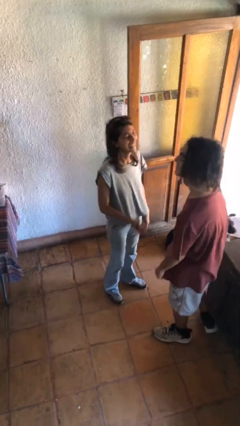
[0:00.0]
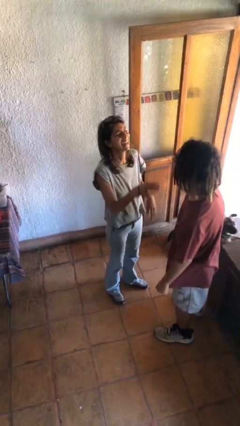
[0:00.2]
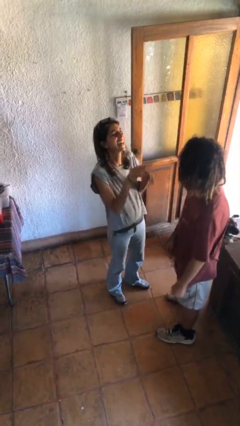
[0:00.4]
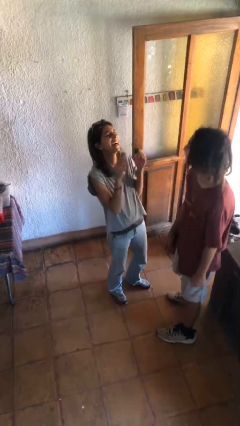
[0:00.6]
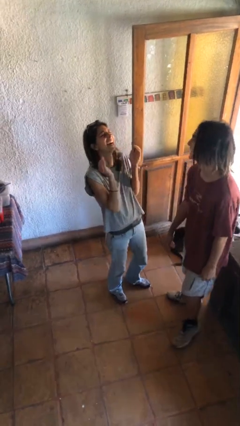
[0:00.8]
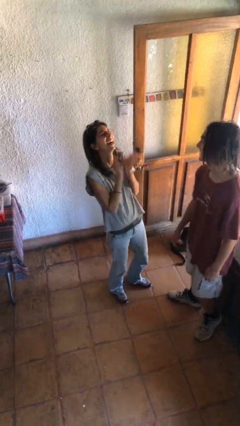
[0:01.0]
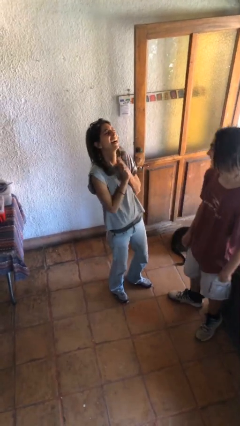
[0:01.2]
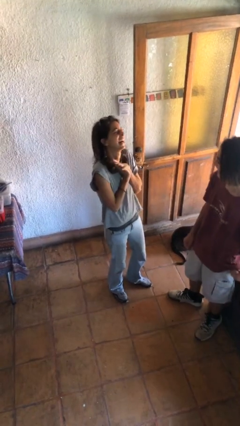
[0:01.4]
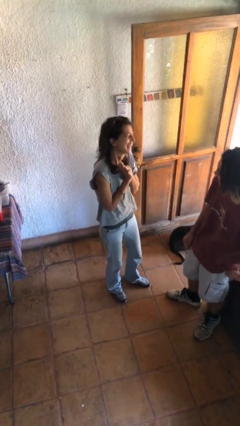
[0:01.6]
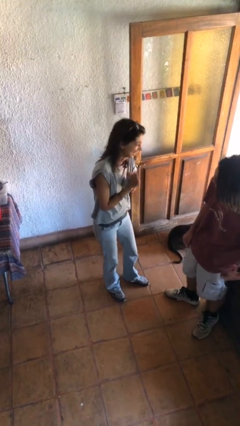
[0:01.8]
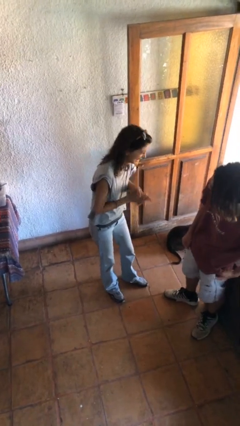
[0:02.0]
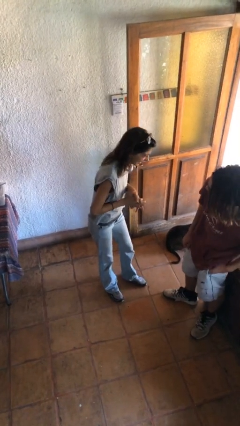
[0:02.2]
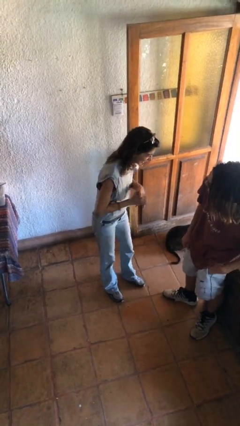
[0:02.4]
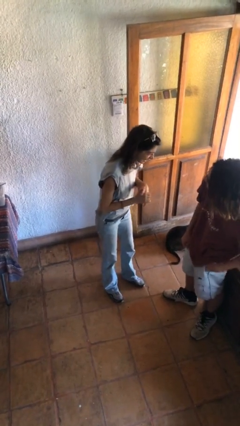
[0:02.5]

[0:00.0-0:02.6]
person laughs with person

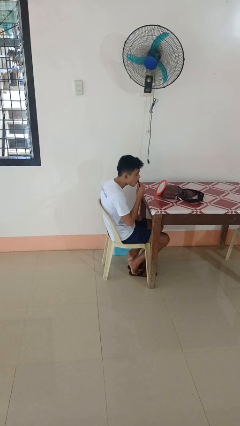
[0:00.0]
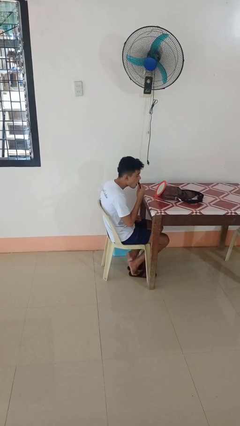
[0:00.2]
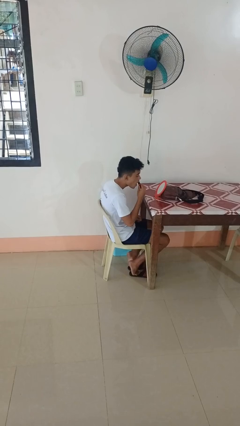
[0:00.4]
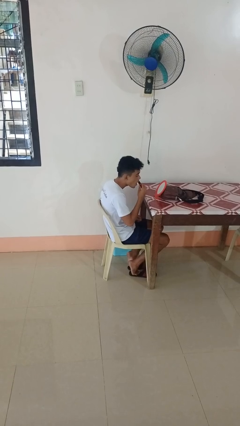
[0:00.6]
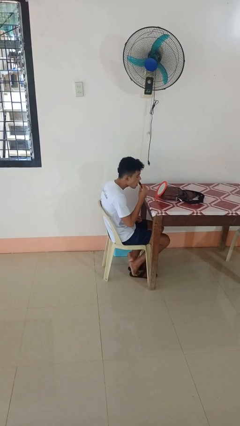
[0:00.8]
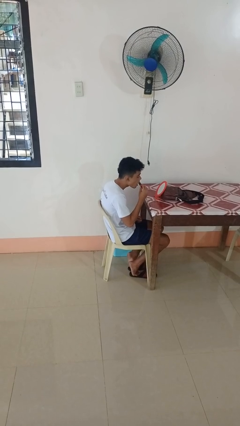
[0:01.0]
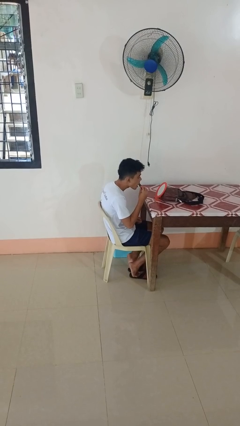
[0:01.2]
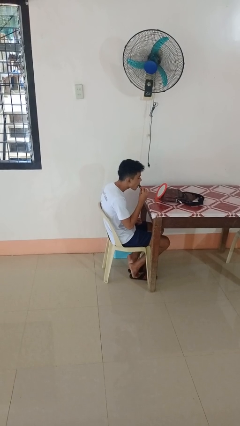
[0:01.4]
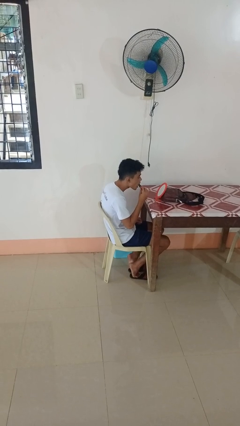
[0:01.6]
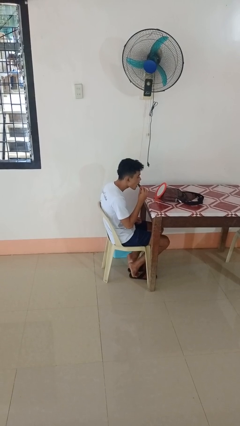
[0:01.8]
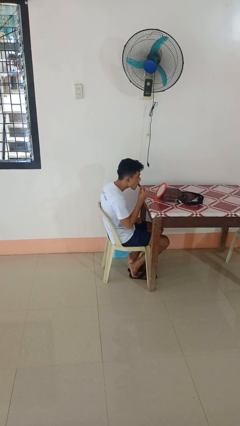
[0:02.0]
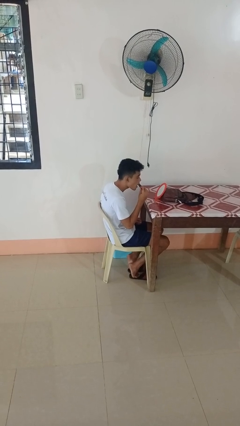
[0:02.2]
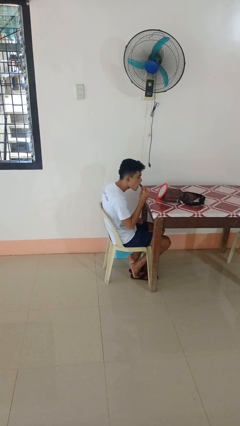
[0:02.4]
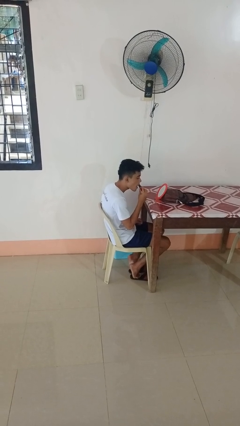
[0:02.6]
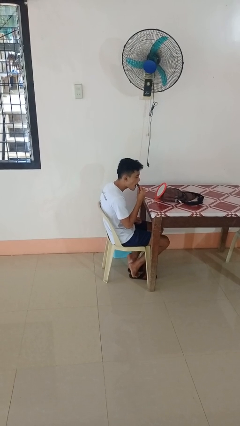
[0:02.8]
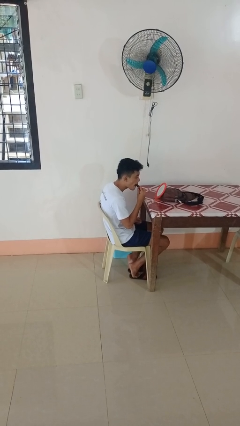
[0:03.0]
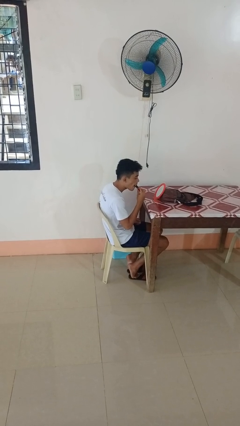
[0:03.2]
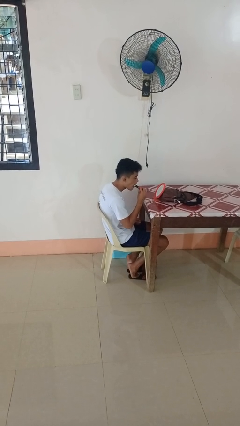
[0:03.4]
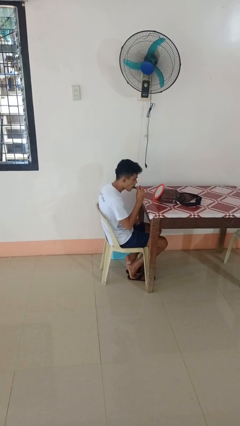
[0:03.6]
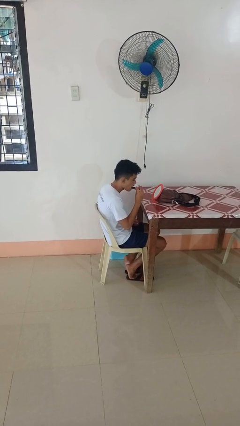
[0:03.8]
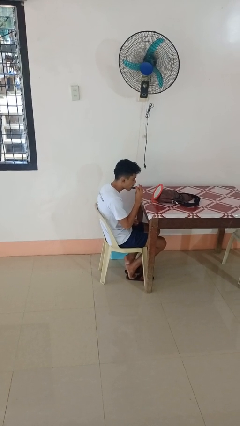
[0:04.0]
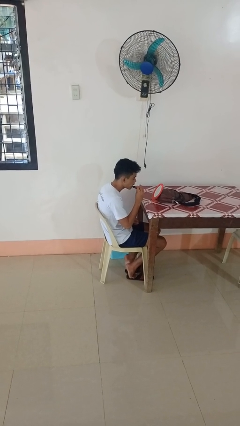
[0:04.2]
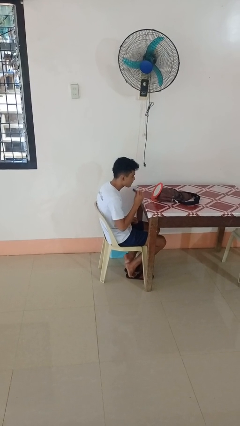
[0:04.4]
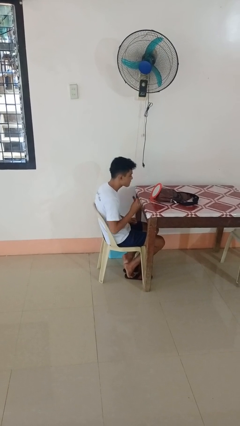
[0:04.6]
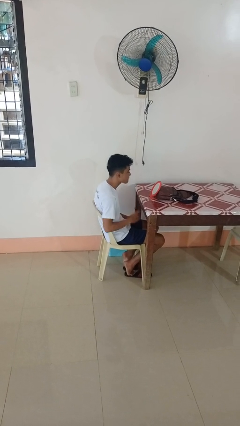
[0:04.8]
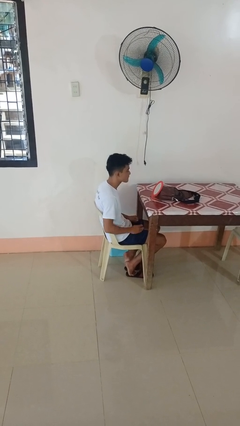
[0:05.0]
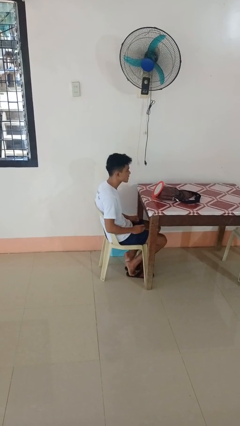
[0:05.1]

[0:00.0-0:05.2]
person applies lip makeup

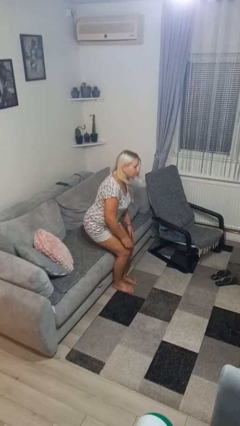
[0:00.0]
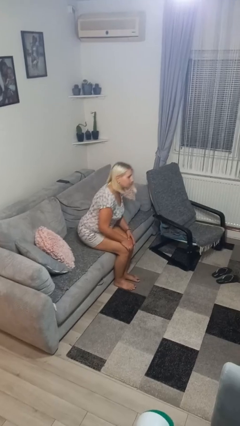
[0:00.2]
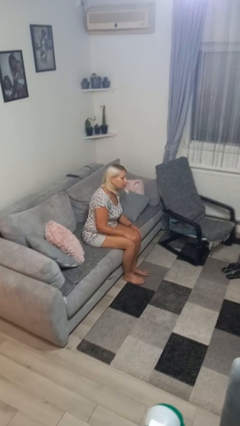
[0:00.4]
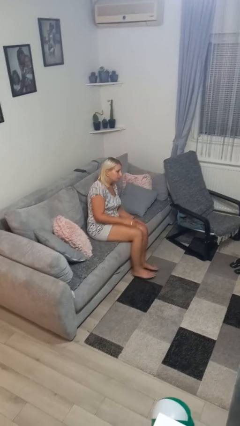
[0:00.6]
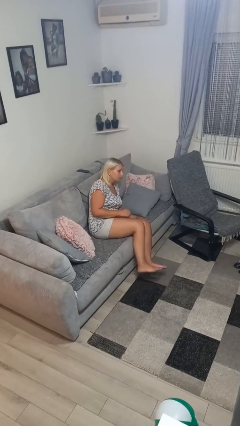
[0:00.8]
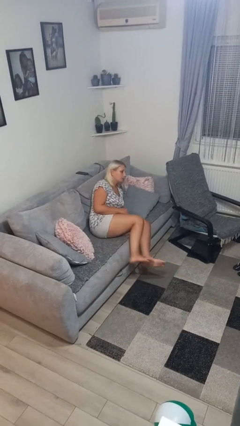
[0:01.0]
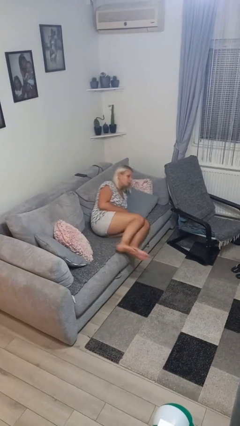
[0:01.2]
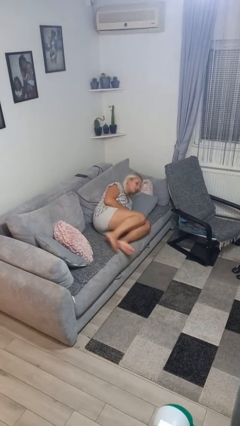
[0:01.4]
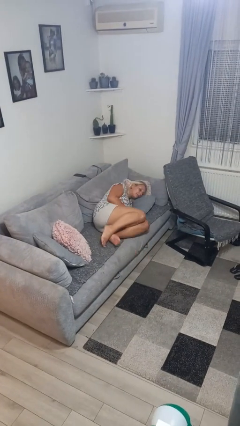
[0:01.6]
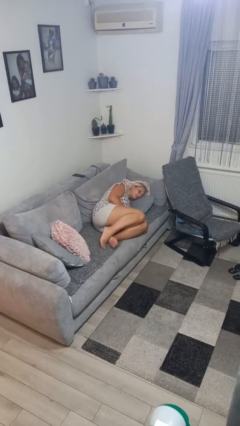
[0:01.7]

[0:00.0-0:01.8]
person lies down on couch

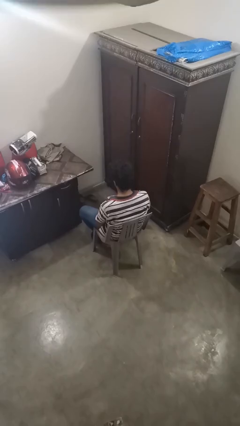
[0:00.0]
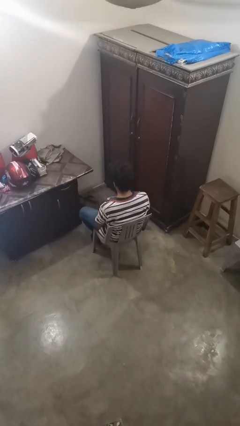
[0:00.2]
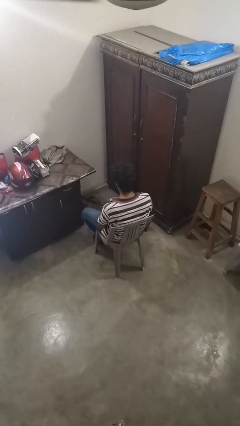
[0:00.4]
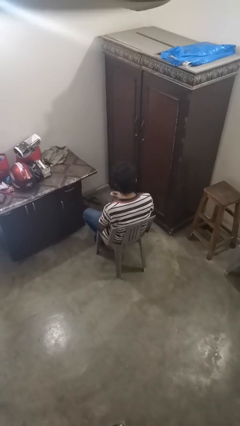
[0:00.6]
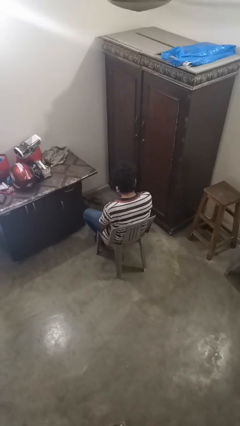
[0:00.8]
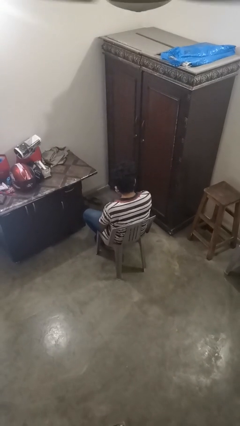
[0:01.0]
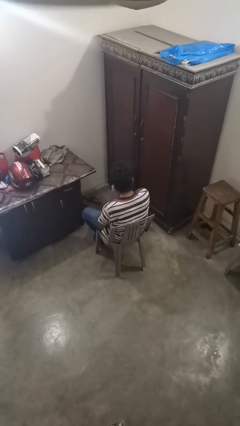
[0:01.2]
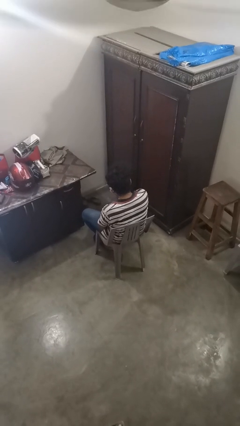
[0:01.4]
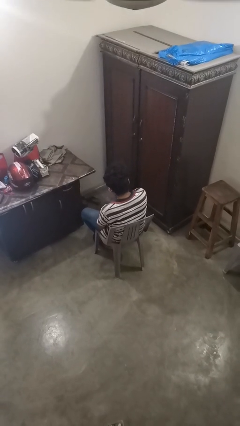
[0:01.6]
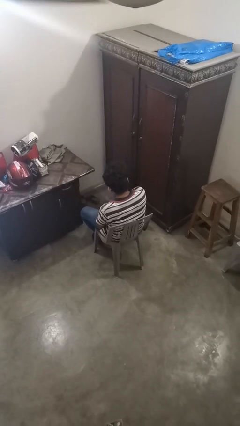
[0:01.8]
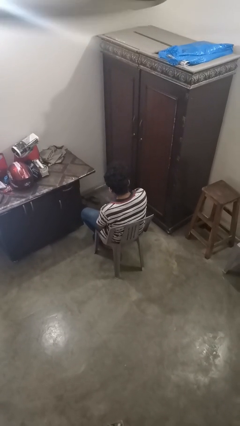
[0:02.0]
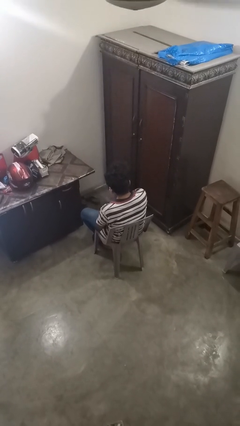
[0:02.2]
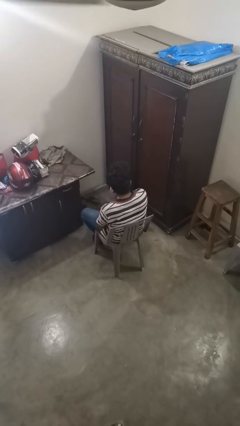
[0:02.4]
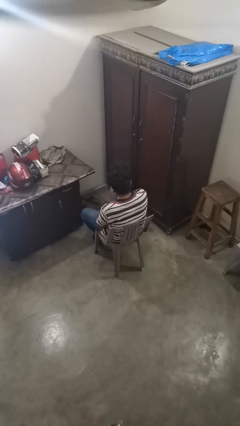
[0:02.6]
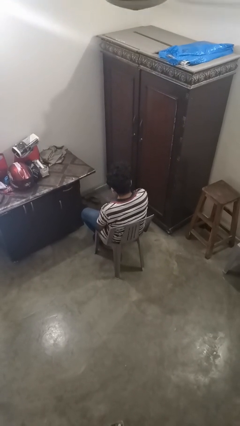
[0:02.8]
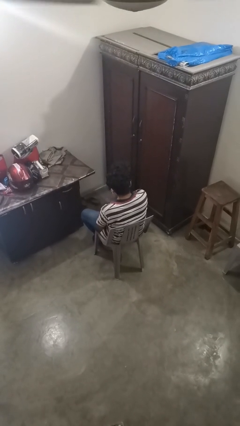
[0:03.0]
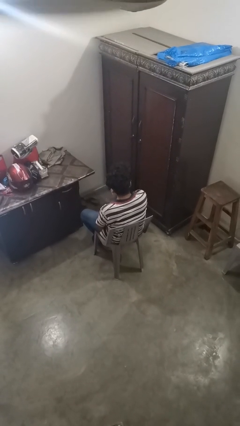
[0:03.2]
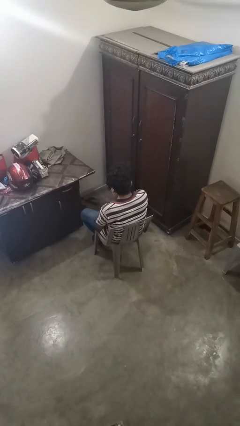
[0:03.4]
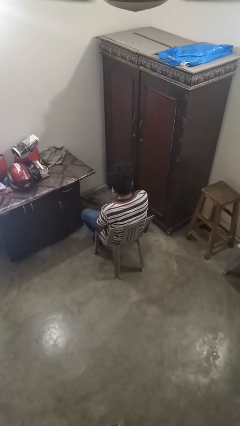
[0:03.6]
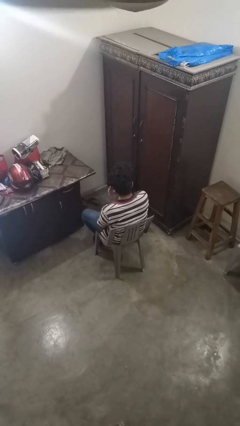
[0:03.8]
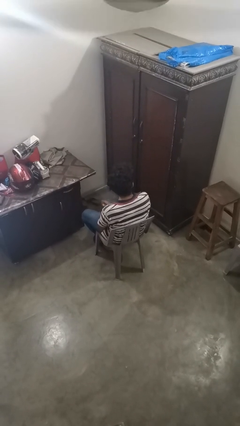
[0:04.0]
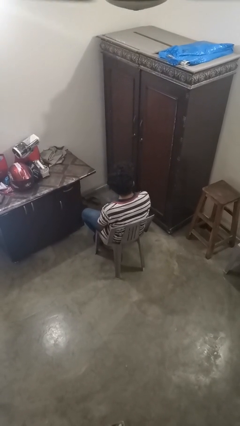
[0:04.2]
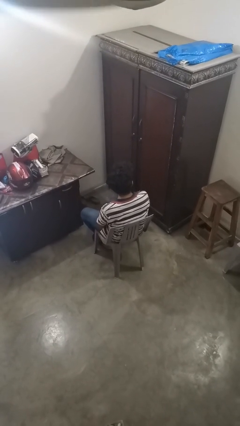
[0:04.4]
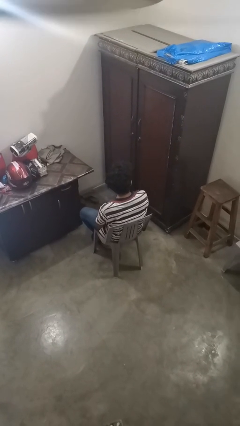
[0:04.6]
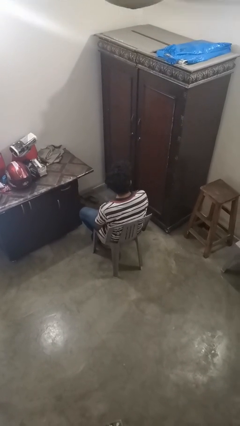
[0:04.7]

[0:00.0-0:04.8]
person puts on earrings

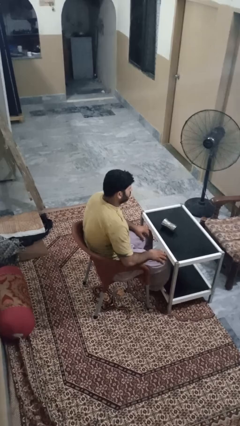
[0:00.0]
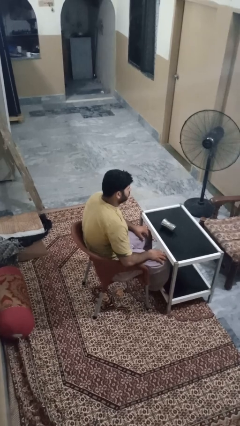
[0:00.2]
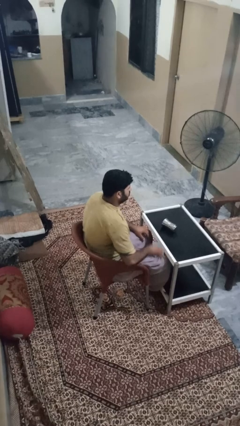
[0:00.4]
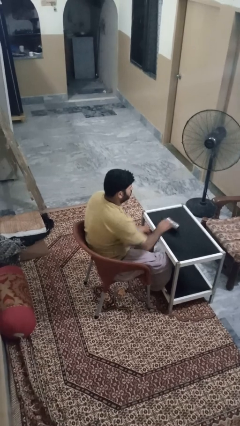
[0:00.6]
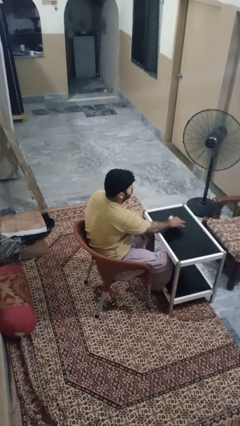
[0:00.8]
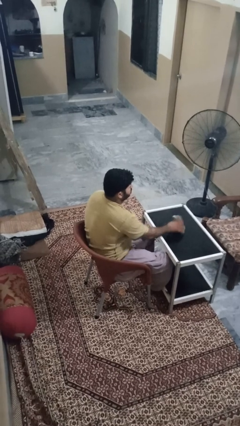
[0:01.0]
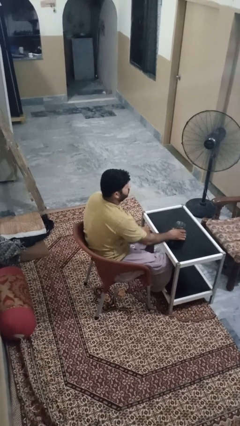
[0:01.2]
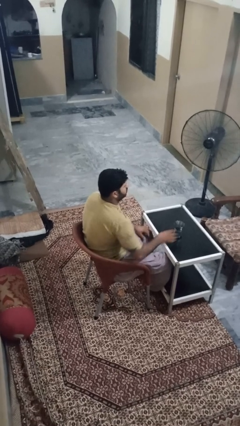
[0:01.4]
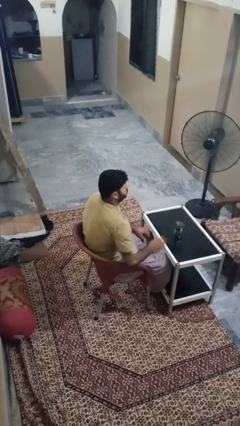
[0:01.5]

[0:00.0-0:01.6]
person sets upright glass

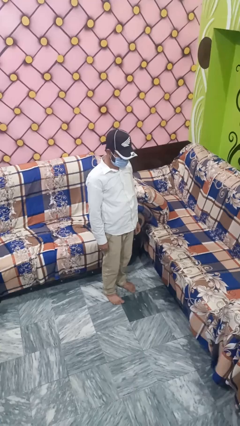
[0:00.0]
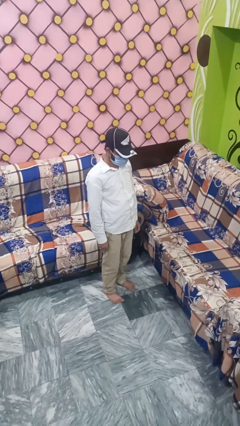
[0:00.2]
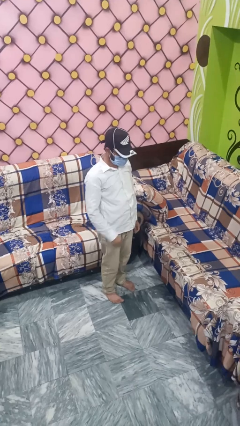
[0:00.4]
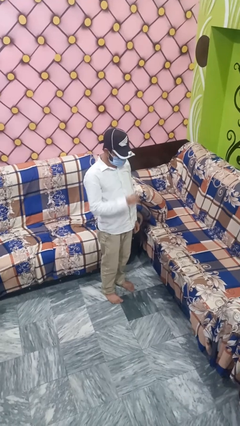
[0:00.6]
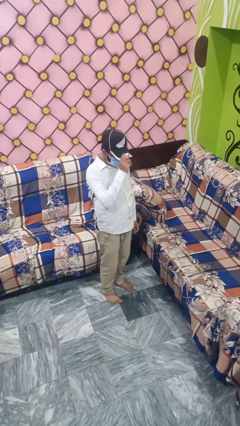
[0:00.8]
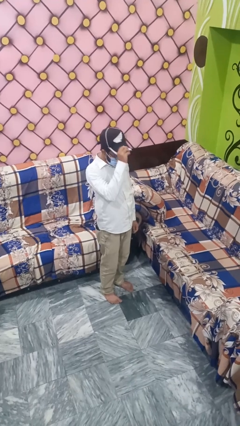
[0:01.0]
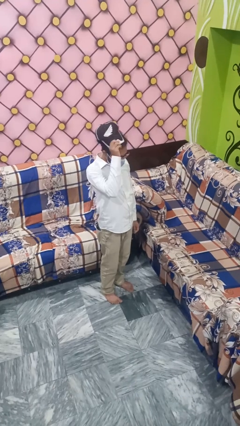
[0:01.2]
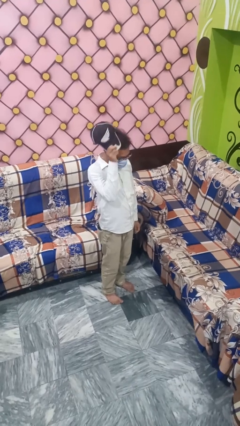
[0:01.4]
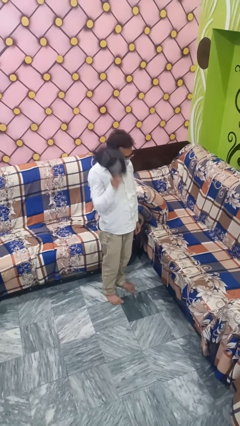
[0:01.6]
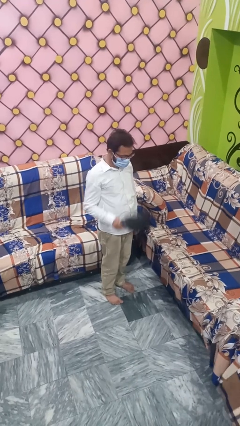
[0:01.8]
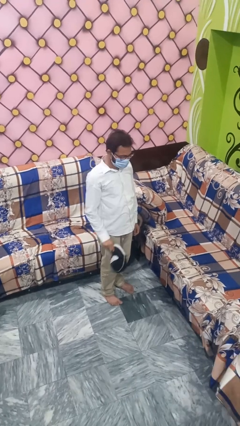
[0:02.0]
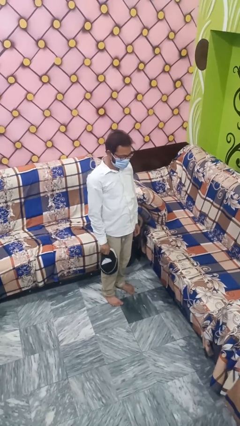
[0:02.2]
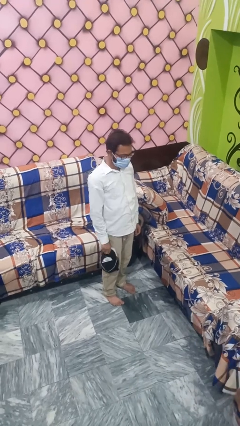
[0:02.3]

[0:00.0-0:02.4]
person takes off hat
